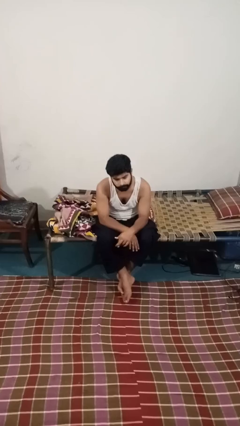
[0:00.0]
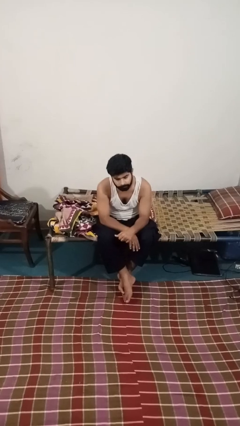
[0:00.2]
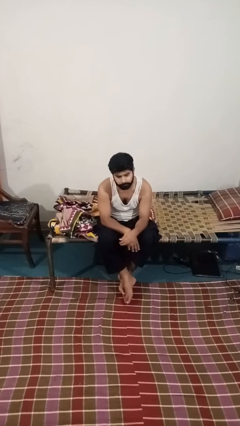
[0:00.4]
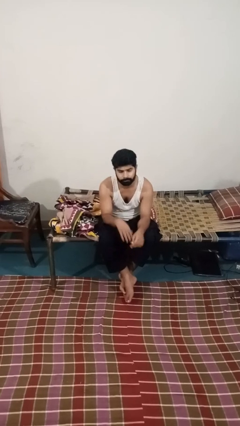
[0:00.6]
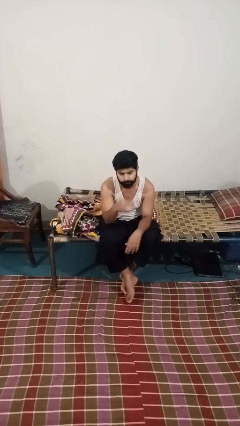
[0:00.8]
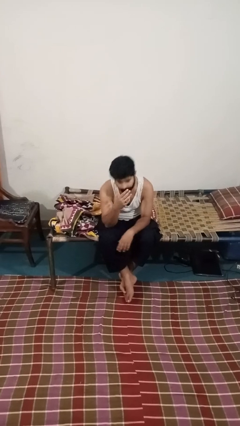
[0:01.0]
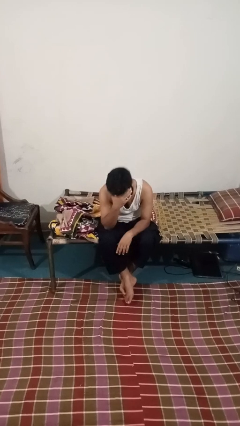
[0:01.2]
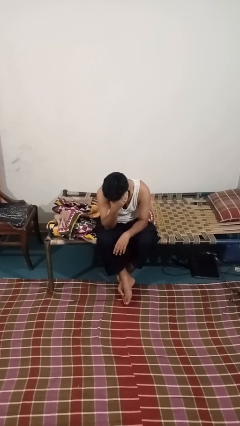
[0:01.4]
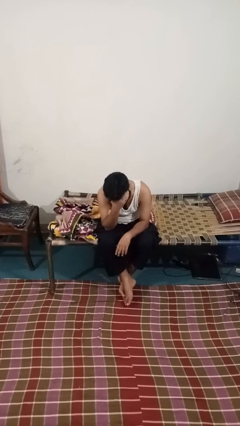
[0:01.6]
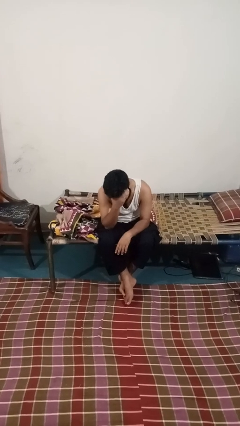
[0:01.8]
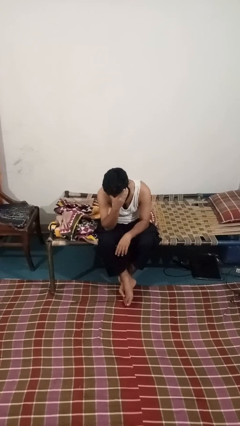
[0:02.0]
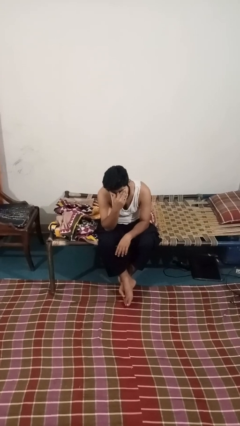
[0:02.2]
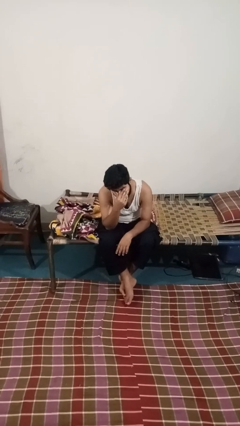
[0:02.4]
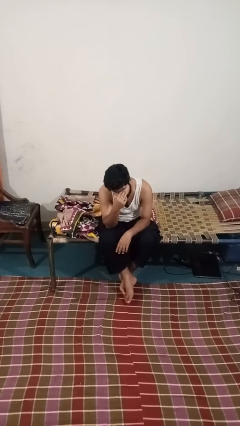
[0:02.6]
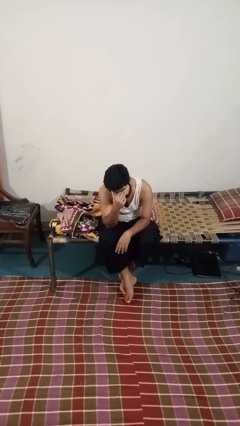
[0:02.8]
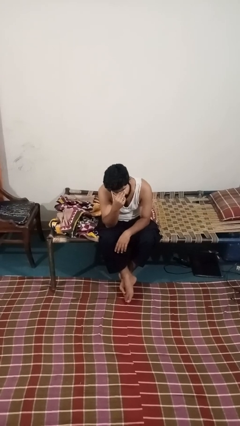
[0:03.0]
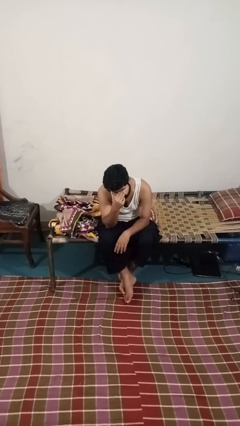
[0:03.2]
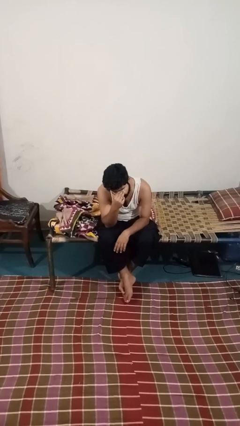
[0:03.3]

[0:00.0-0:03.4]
person covers face with hands

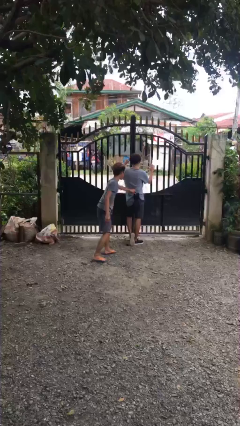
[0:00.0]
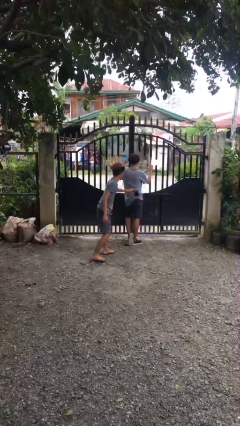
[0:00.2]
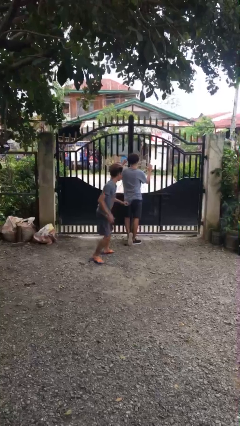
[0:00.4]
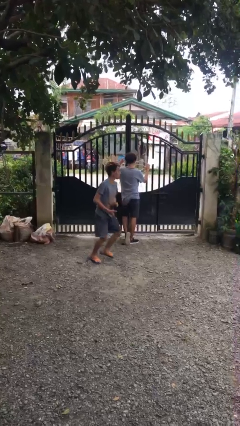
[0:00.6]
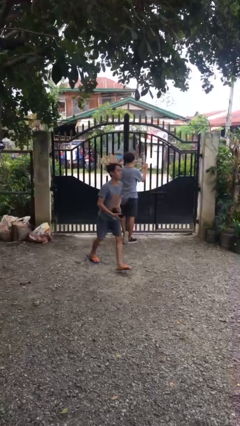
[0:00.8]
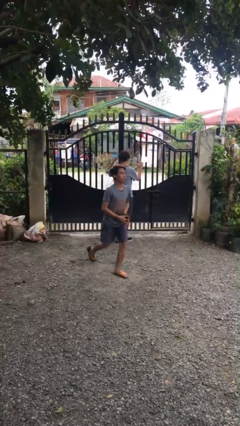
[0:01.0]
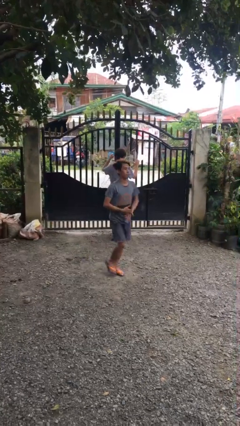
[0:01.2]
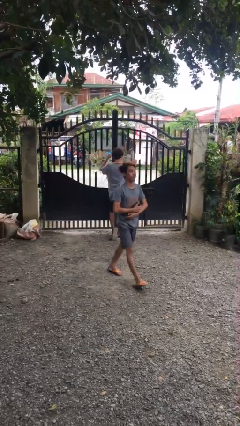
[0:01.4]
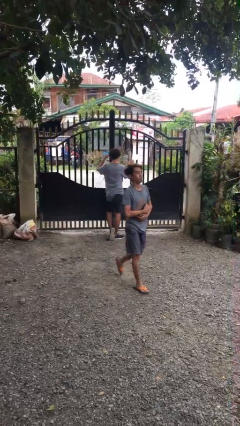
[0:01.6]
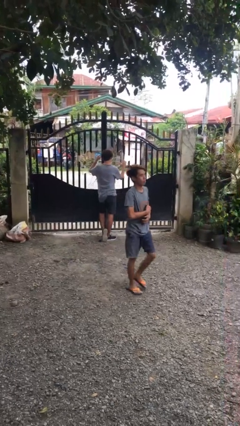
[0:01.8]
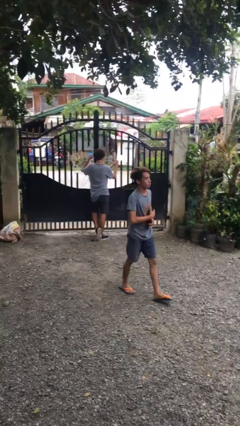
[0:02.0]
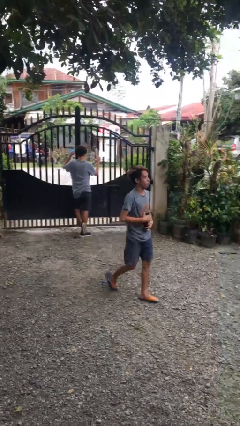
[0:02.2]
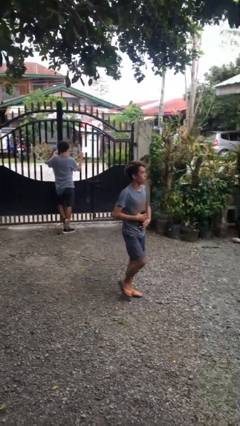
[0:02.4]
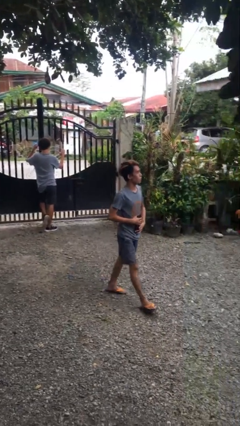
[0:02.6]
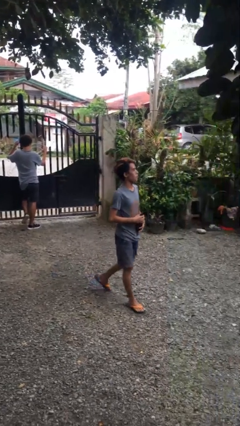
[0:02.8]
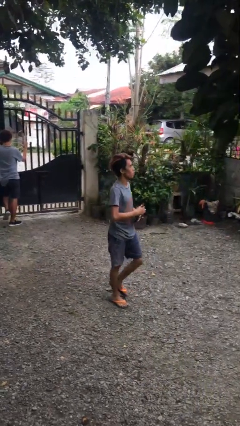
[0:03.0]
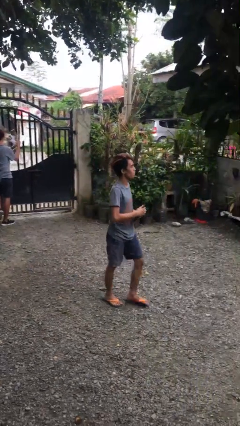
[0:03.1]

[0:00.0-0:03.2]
person steals object from person

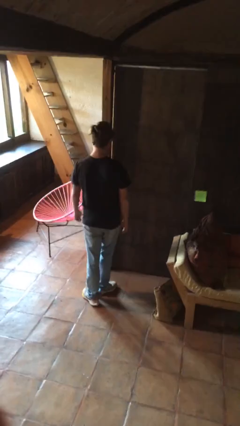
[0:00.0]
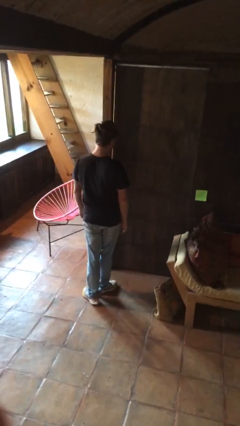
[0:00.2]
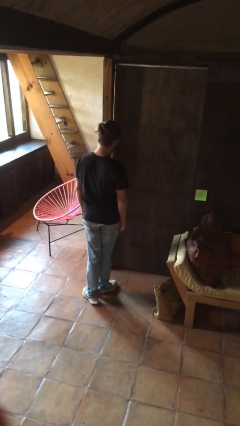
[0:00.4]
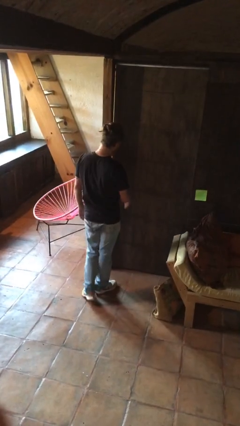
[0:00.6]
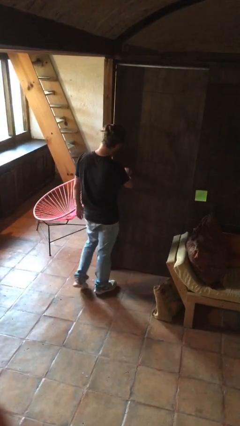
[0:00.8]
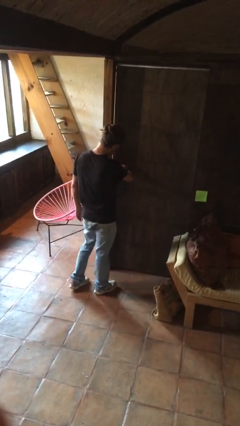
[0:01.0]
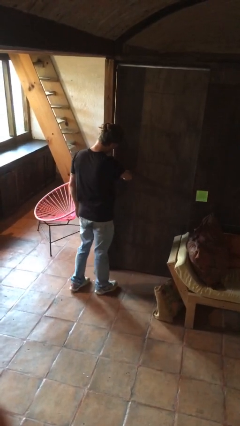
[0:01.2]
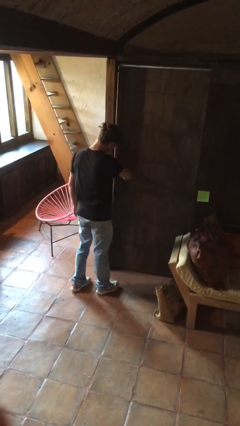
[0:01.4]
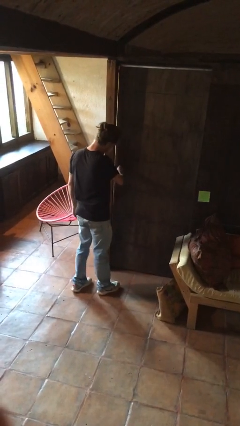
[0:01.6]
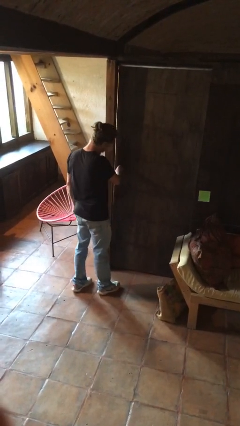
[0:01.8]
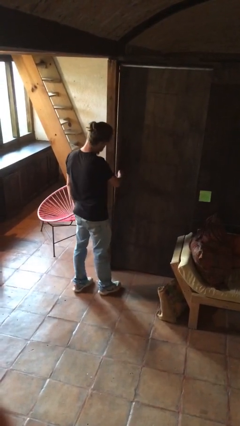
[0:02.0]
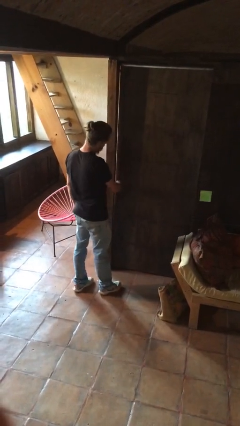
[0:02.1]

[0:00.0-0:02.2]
person unlocks door with keys

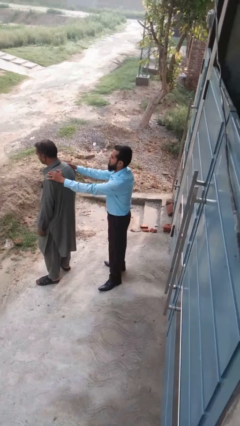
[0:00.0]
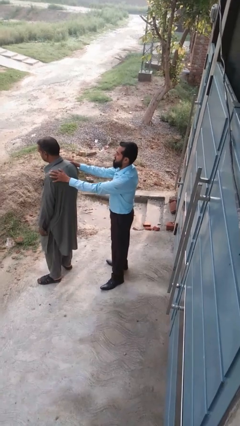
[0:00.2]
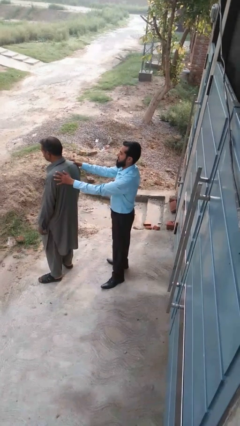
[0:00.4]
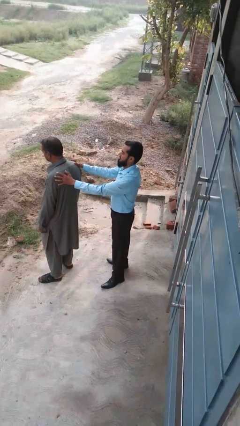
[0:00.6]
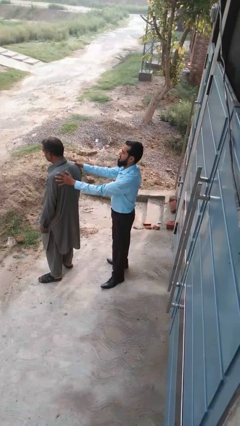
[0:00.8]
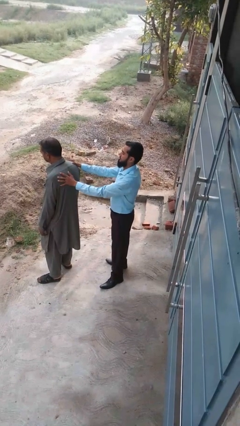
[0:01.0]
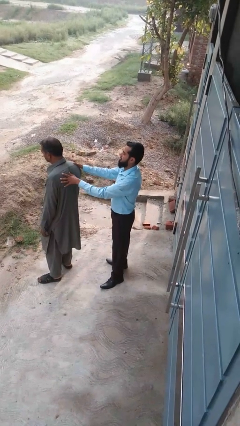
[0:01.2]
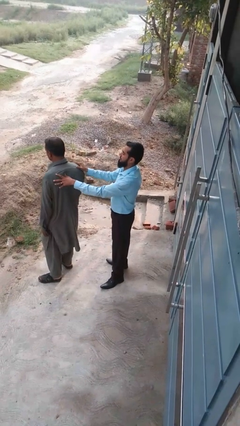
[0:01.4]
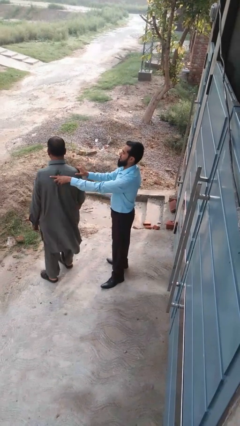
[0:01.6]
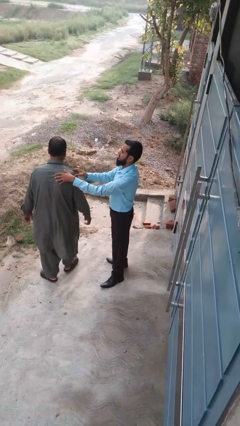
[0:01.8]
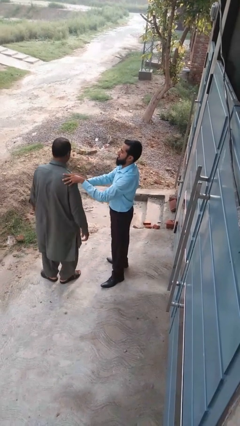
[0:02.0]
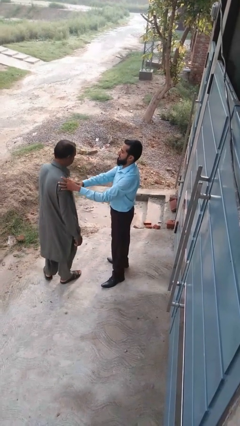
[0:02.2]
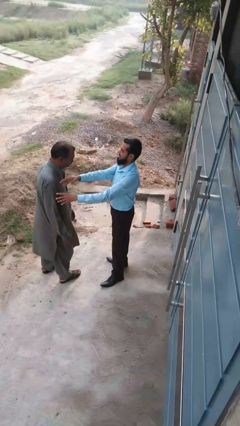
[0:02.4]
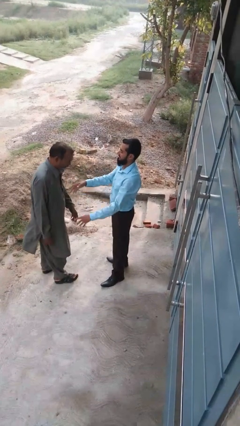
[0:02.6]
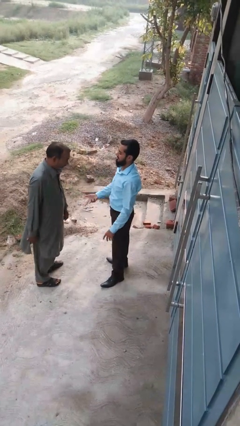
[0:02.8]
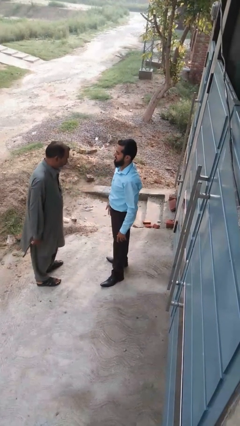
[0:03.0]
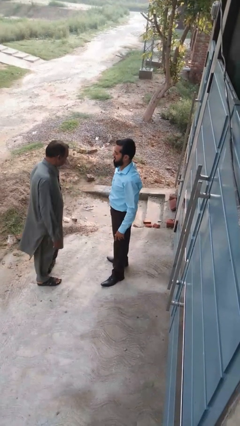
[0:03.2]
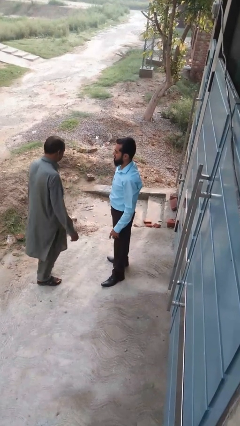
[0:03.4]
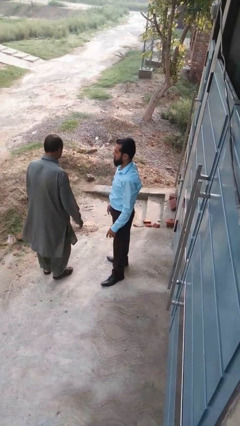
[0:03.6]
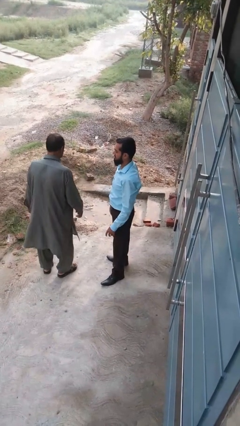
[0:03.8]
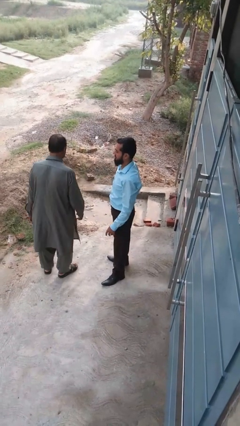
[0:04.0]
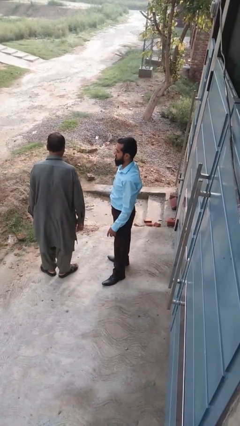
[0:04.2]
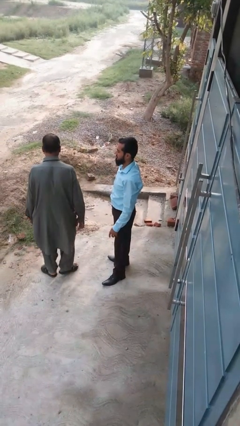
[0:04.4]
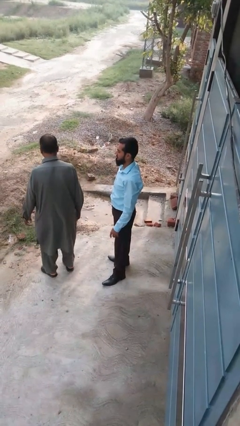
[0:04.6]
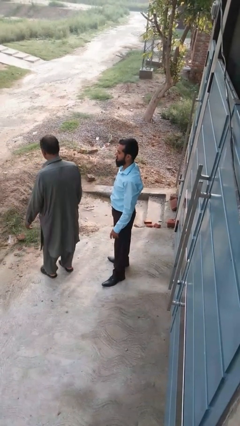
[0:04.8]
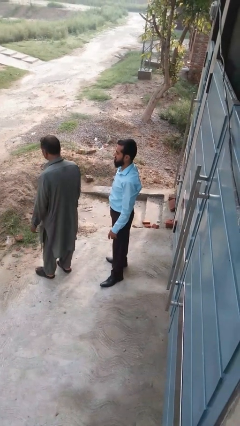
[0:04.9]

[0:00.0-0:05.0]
person spins person around

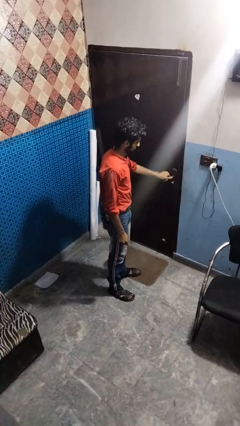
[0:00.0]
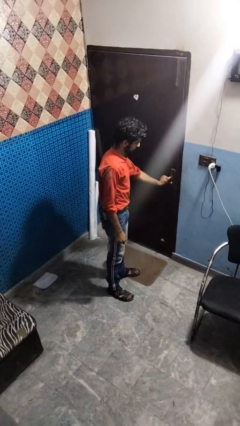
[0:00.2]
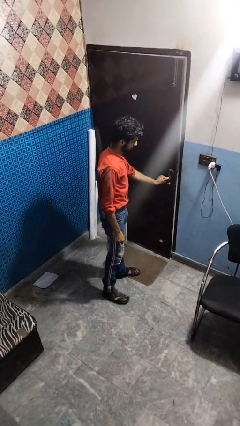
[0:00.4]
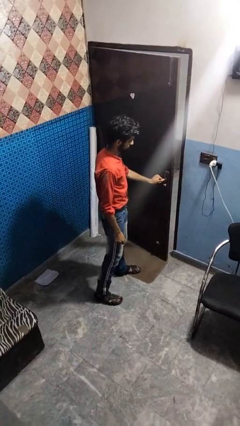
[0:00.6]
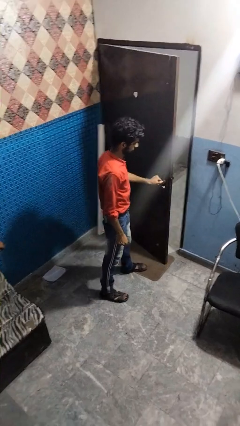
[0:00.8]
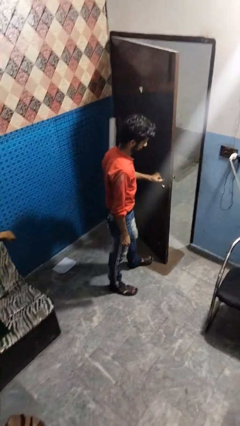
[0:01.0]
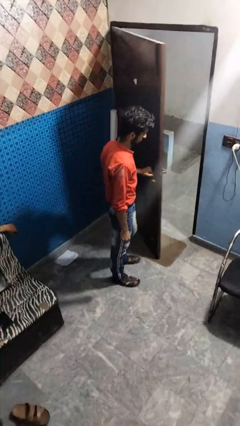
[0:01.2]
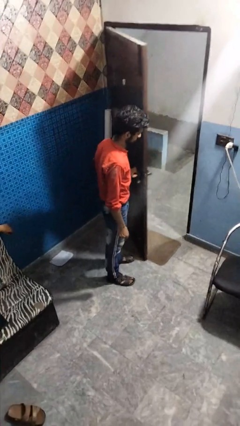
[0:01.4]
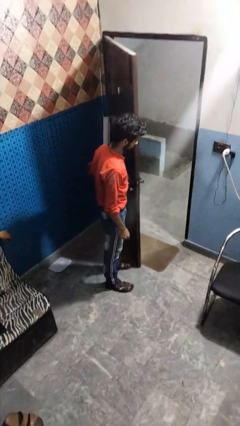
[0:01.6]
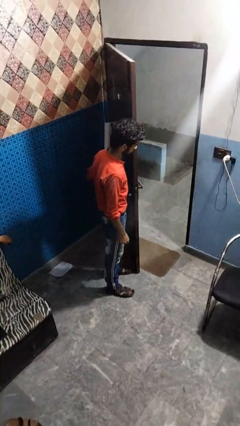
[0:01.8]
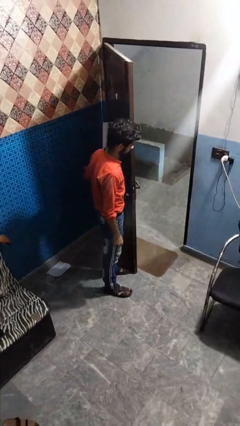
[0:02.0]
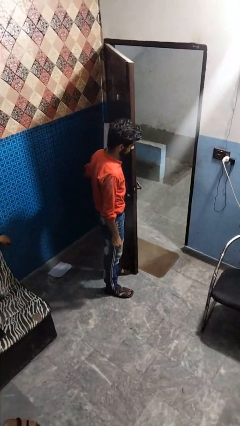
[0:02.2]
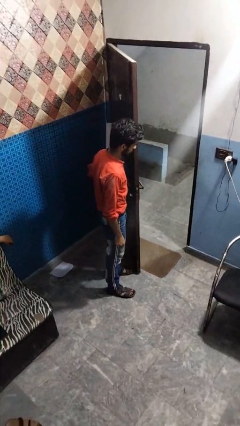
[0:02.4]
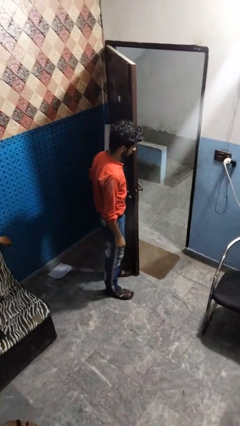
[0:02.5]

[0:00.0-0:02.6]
person opens facility door

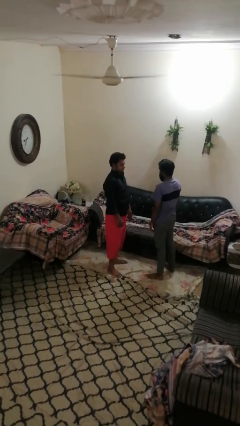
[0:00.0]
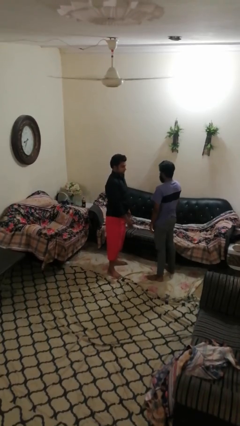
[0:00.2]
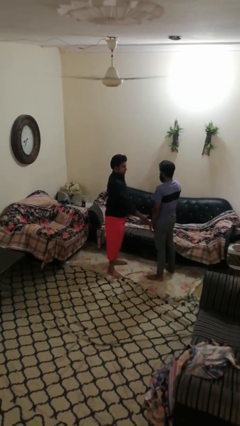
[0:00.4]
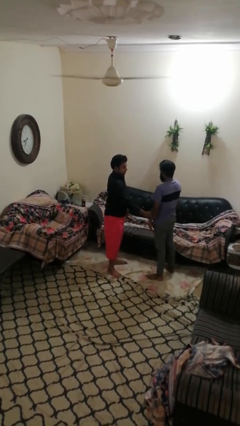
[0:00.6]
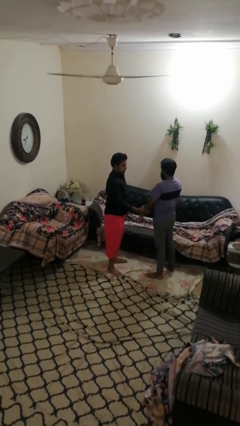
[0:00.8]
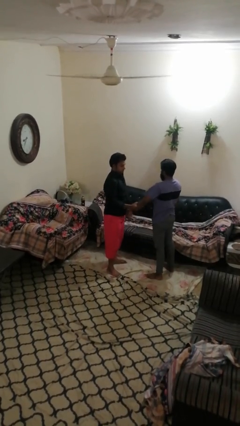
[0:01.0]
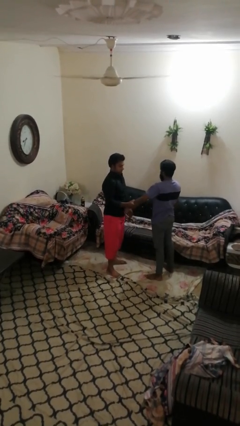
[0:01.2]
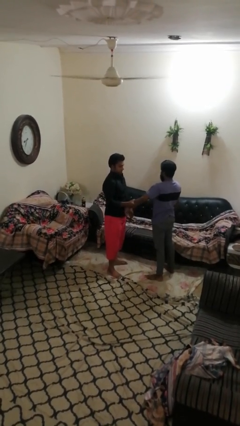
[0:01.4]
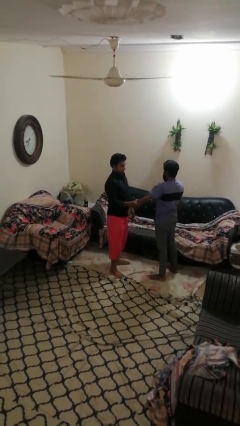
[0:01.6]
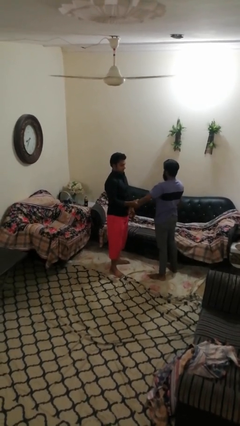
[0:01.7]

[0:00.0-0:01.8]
person grabs person by forearm
